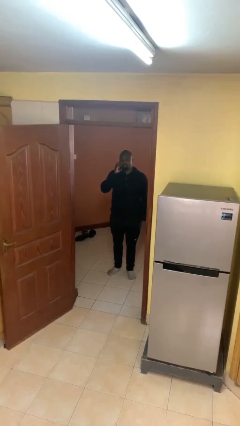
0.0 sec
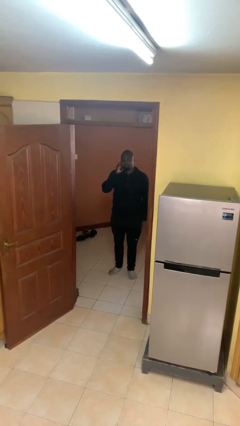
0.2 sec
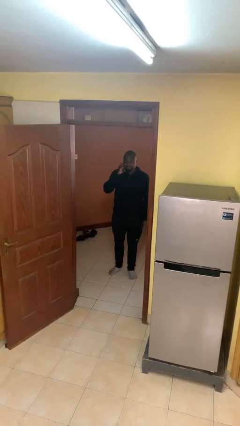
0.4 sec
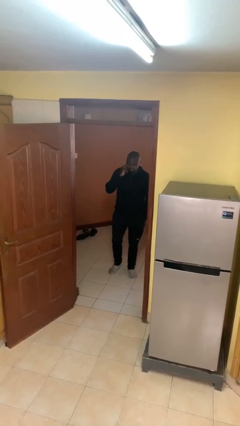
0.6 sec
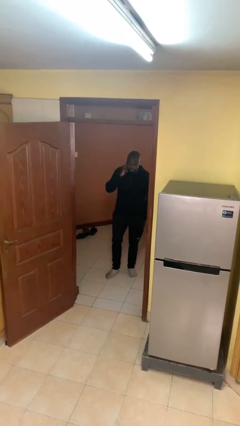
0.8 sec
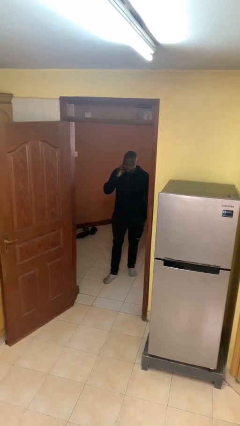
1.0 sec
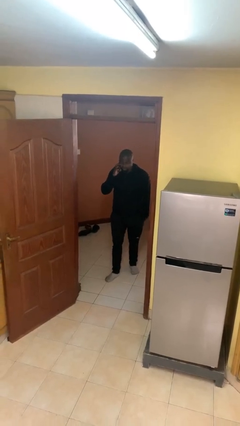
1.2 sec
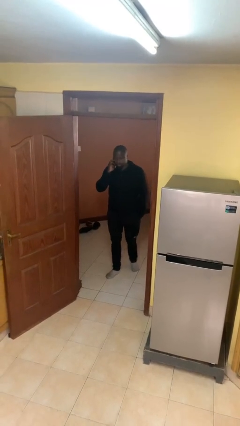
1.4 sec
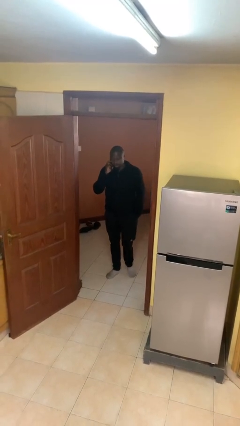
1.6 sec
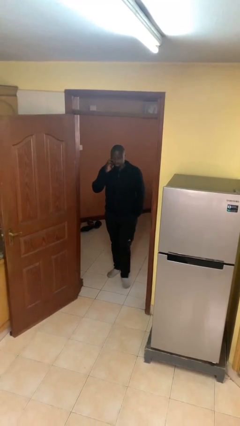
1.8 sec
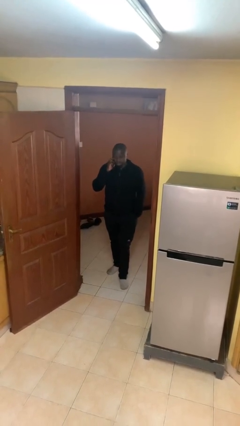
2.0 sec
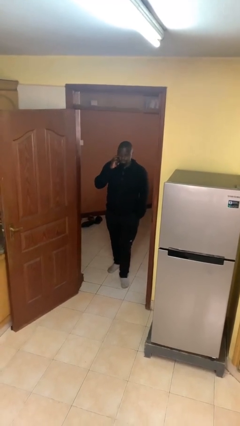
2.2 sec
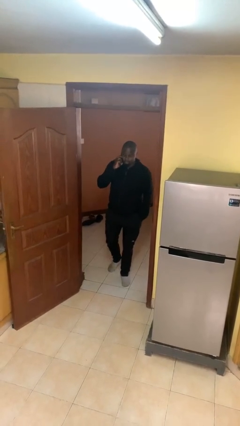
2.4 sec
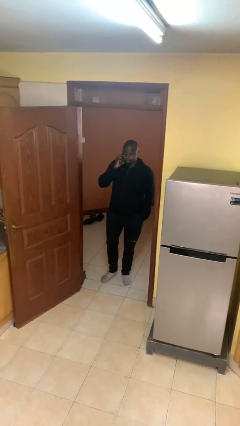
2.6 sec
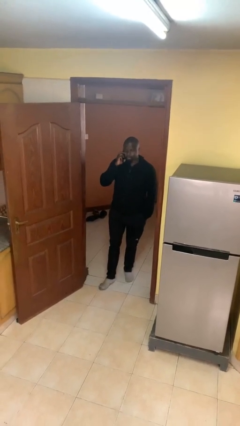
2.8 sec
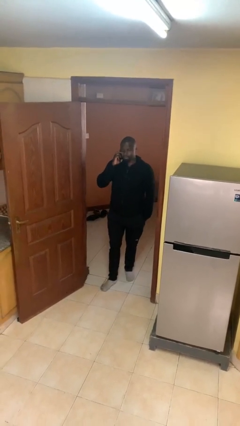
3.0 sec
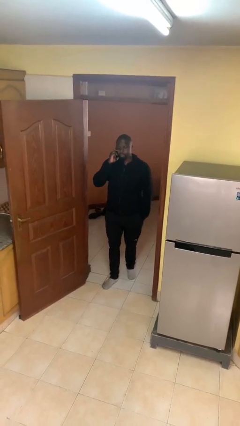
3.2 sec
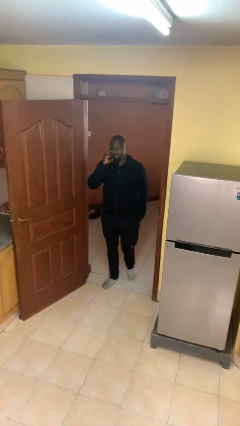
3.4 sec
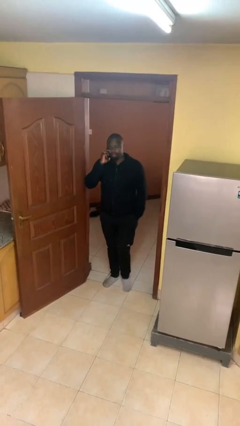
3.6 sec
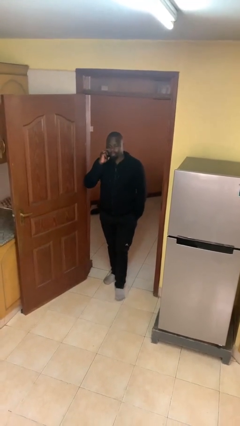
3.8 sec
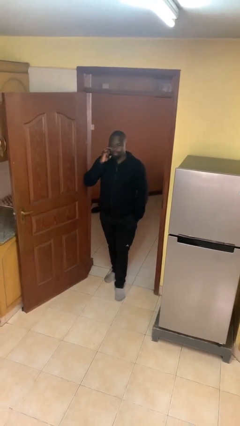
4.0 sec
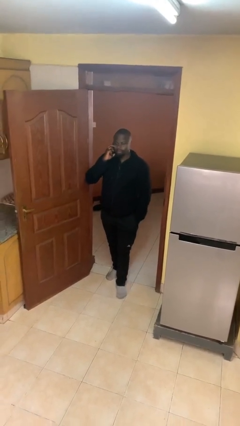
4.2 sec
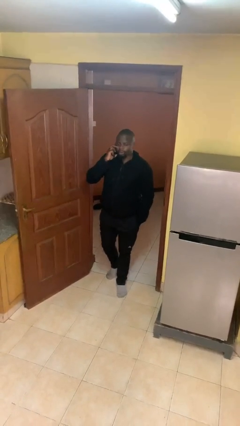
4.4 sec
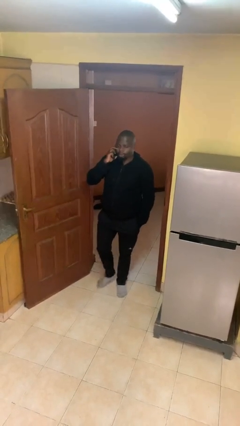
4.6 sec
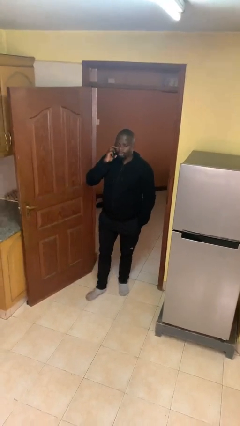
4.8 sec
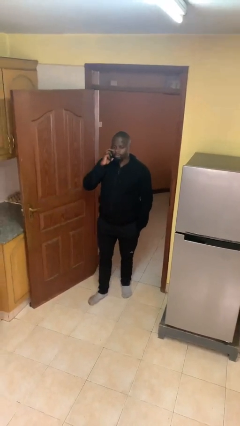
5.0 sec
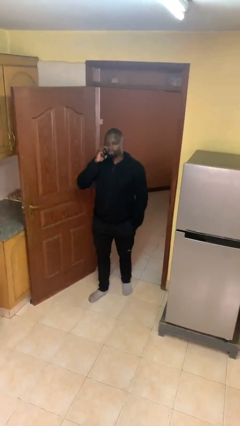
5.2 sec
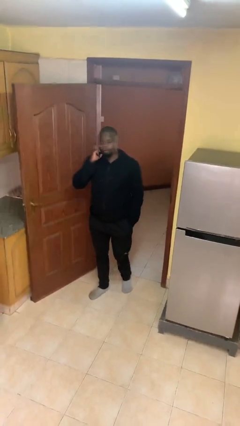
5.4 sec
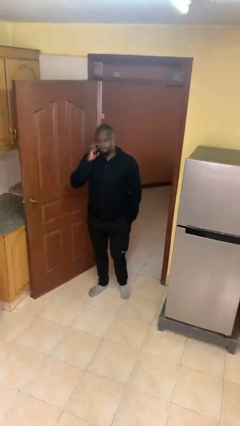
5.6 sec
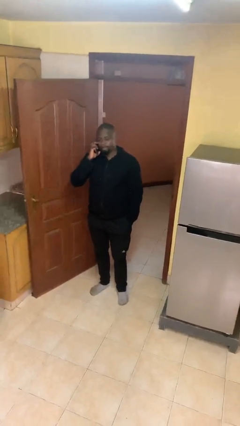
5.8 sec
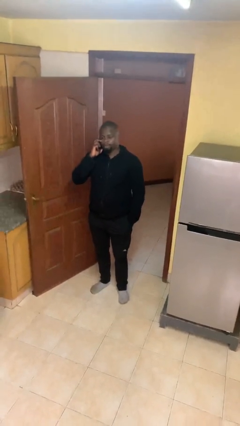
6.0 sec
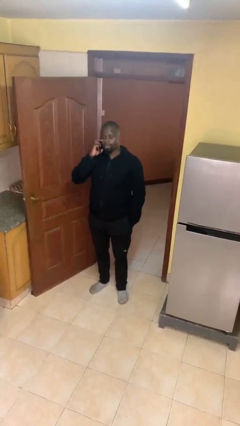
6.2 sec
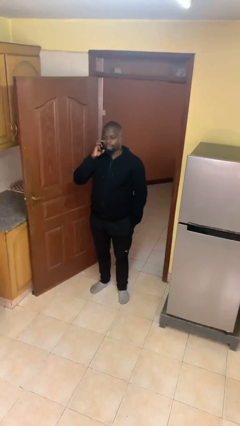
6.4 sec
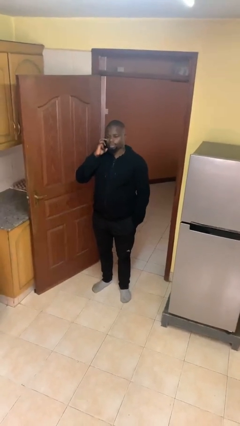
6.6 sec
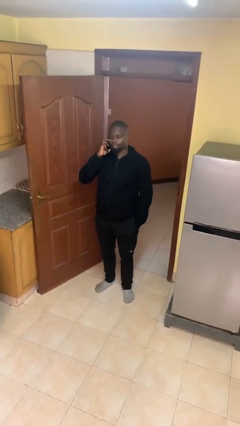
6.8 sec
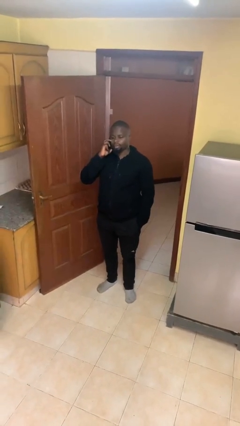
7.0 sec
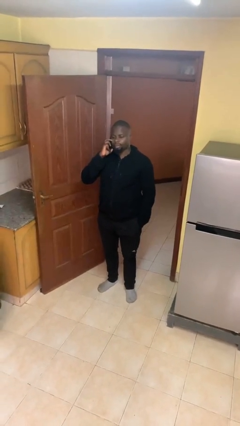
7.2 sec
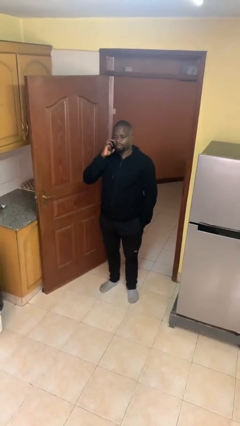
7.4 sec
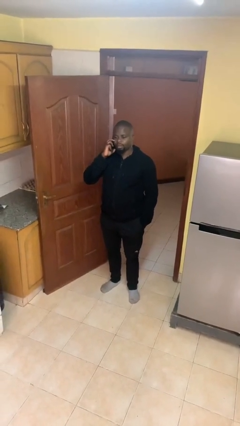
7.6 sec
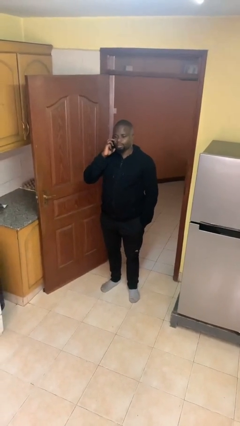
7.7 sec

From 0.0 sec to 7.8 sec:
person enters scene through structure

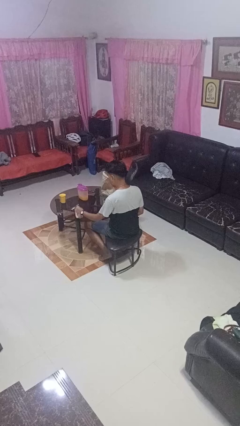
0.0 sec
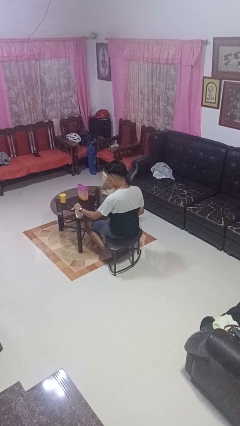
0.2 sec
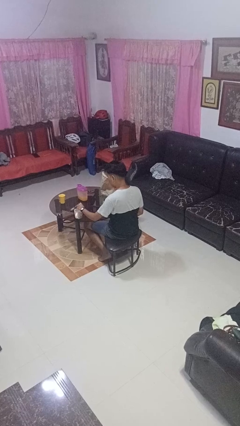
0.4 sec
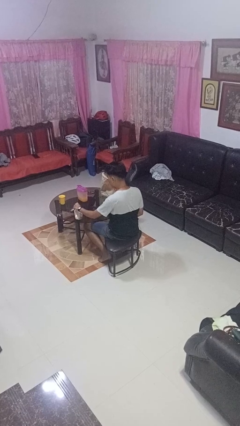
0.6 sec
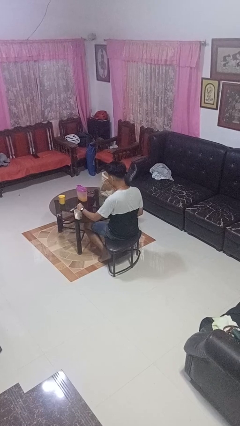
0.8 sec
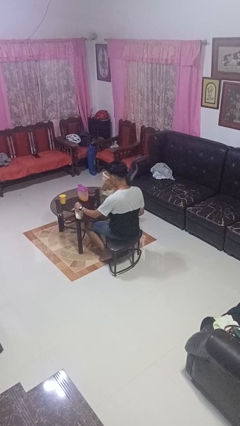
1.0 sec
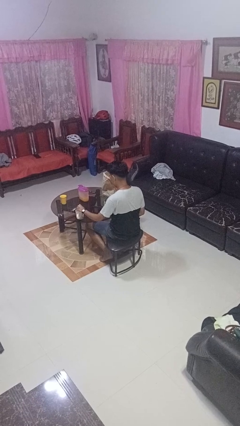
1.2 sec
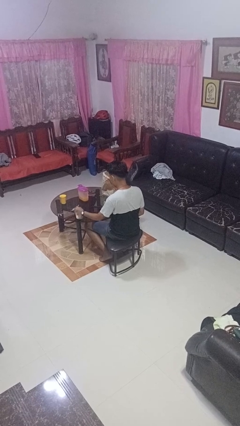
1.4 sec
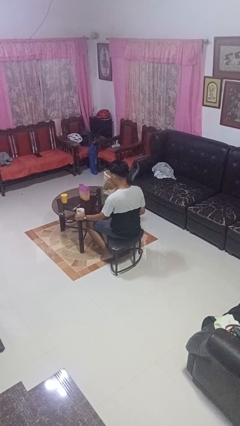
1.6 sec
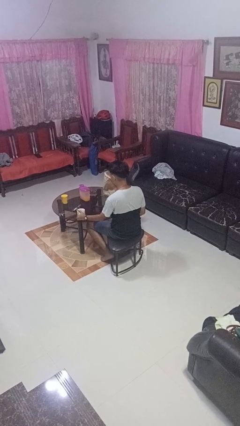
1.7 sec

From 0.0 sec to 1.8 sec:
person stirs mug

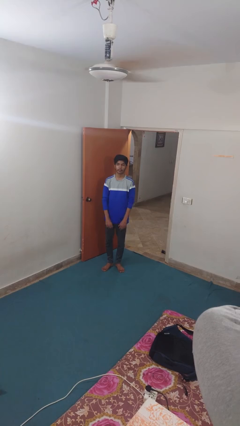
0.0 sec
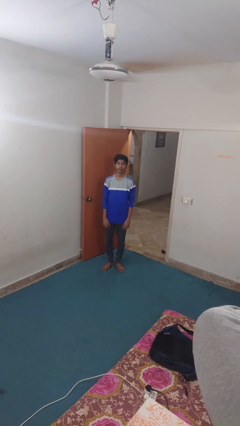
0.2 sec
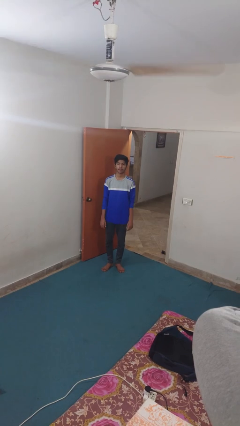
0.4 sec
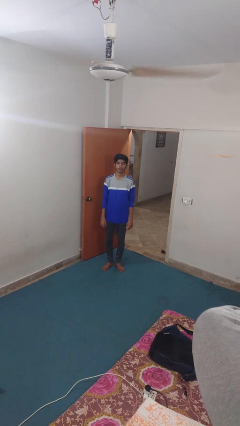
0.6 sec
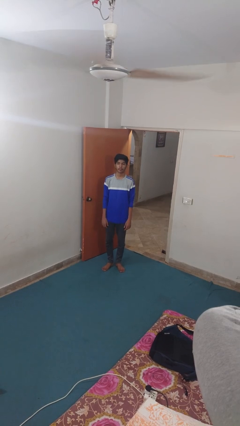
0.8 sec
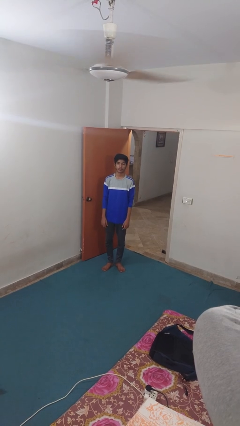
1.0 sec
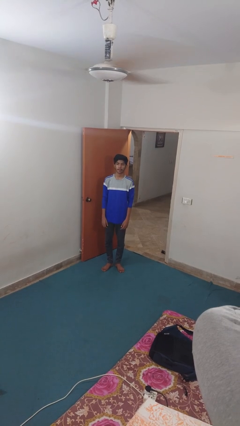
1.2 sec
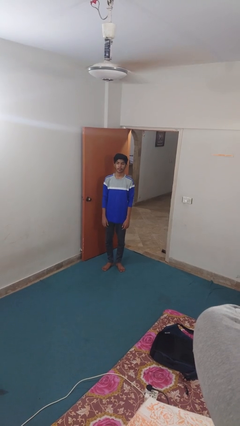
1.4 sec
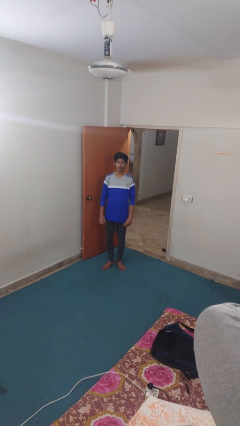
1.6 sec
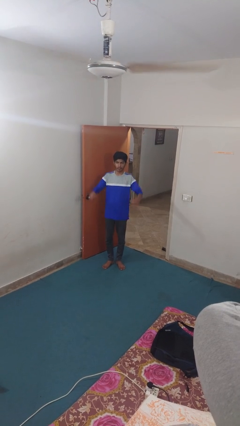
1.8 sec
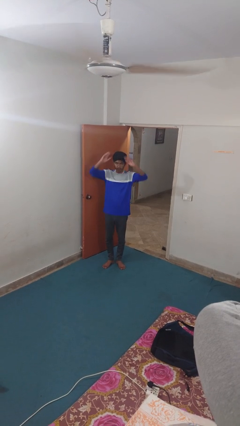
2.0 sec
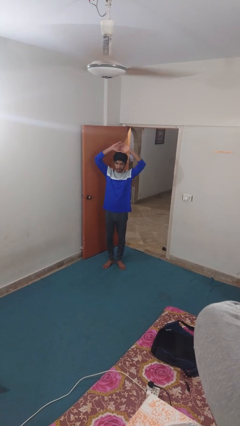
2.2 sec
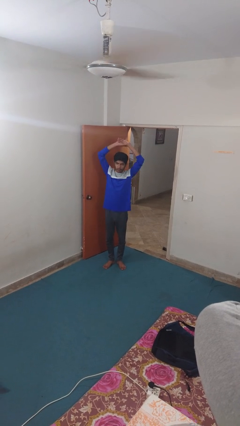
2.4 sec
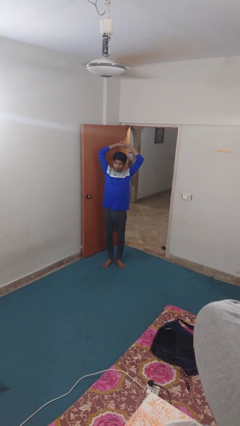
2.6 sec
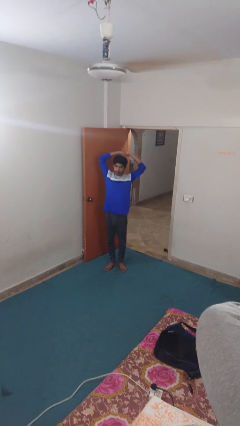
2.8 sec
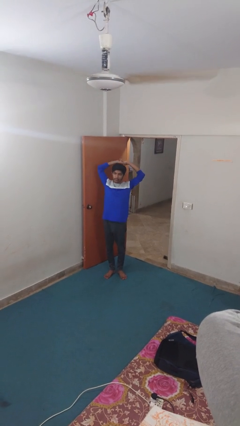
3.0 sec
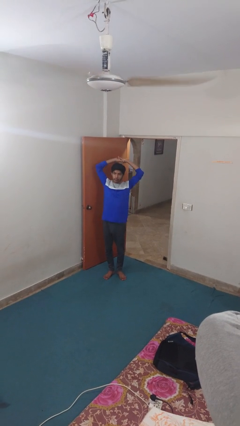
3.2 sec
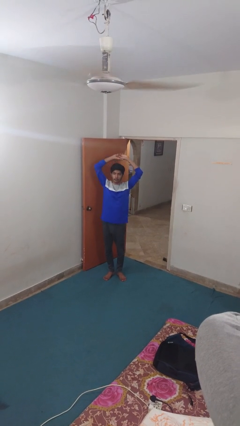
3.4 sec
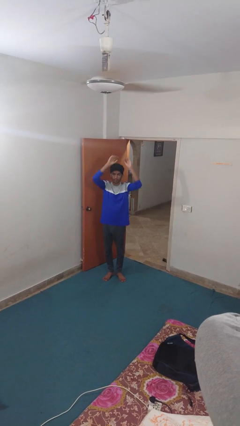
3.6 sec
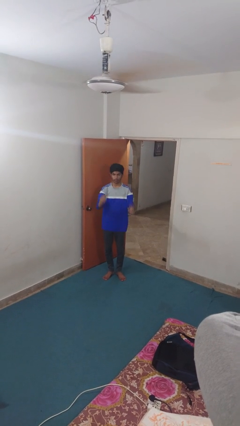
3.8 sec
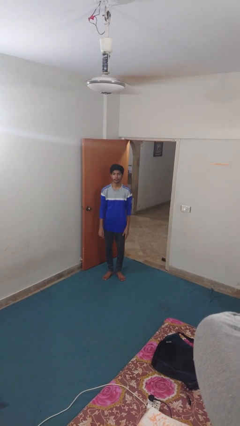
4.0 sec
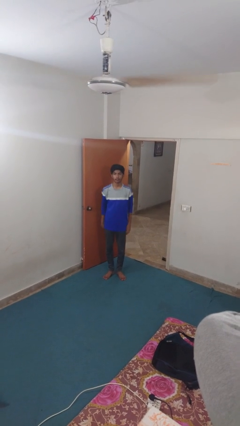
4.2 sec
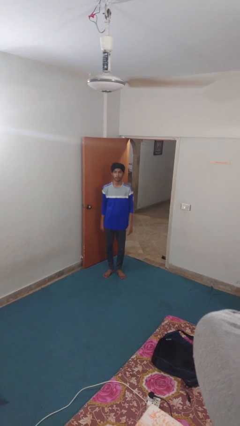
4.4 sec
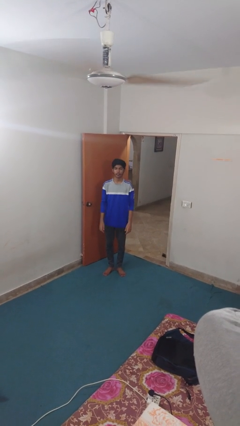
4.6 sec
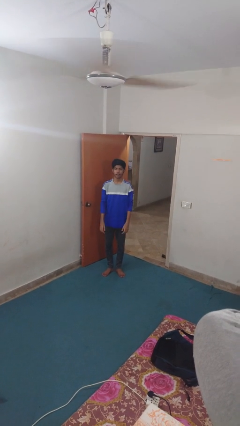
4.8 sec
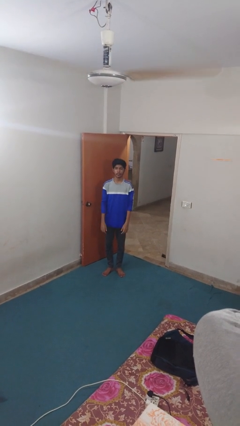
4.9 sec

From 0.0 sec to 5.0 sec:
person stretches arms over head

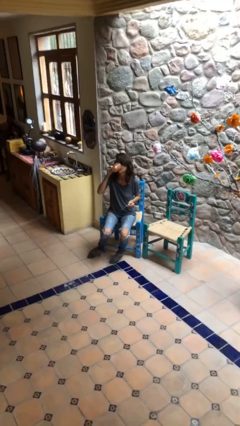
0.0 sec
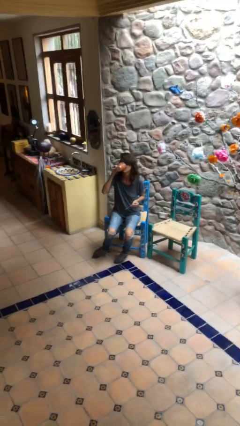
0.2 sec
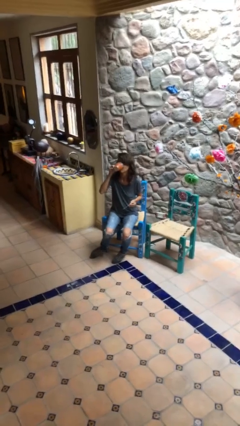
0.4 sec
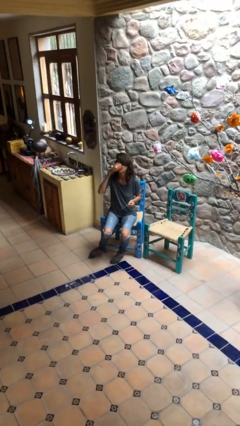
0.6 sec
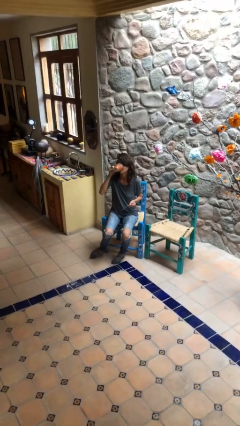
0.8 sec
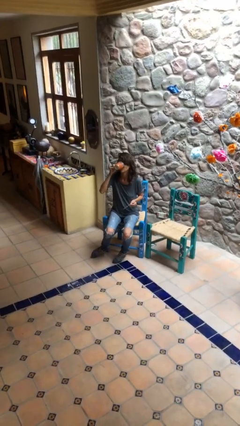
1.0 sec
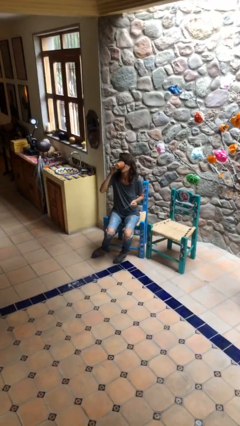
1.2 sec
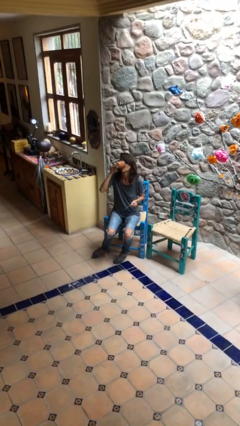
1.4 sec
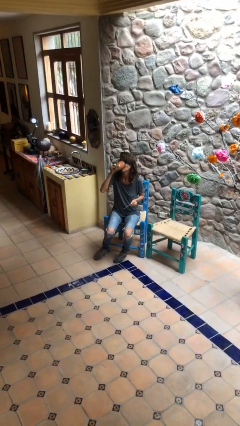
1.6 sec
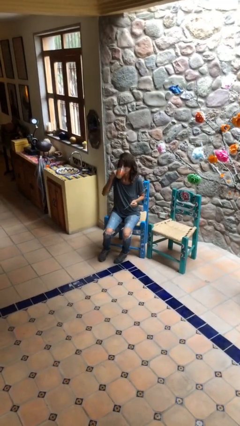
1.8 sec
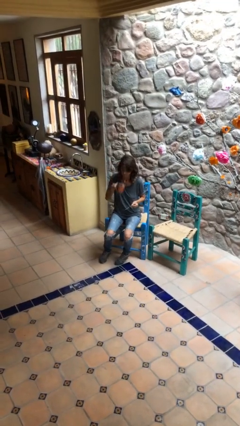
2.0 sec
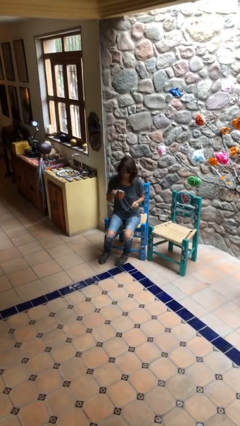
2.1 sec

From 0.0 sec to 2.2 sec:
person drinks from mug

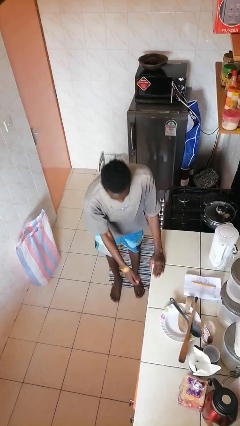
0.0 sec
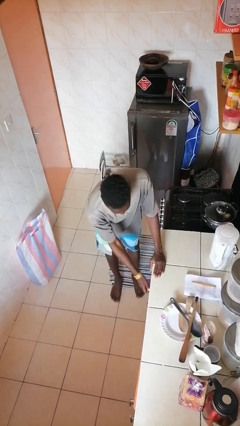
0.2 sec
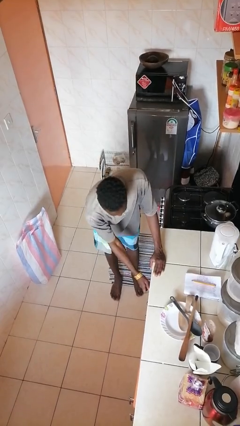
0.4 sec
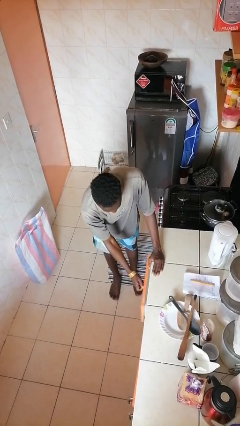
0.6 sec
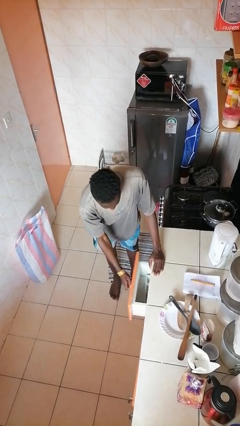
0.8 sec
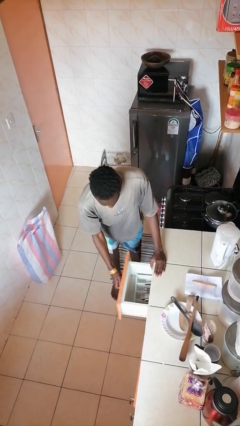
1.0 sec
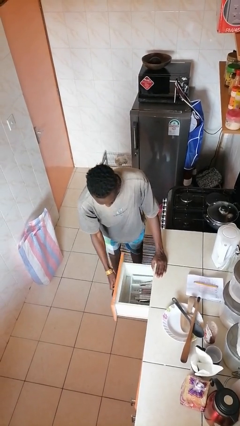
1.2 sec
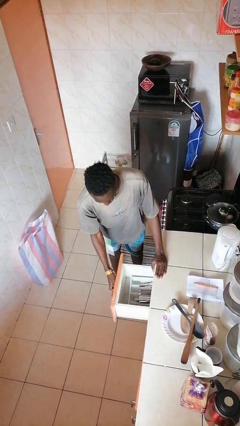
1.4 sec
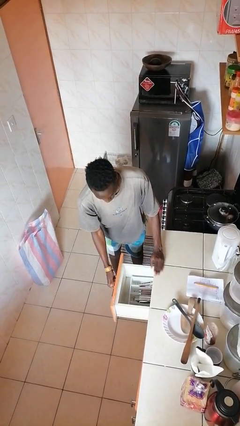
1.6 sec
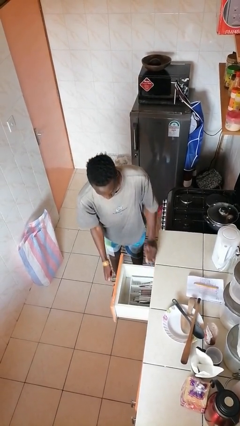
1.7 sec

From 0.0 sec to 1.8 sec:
person opens kitchen drawer
